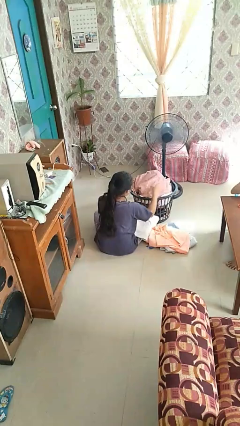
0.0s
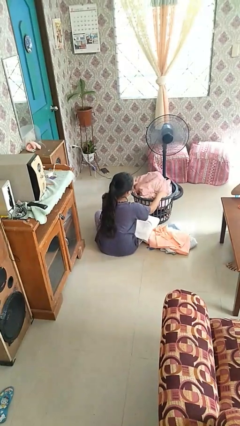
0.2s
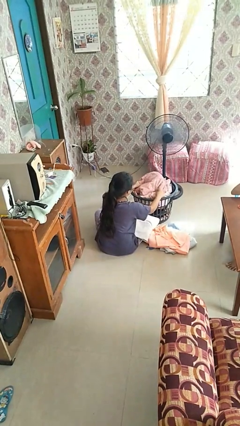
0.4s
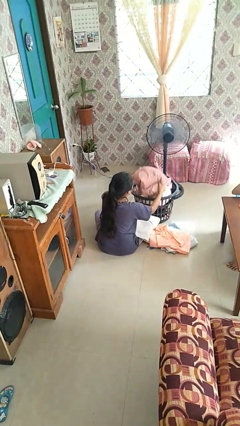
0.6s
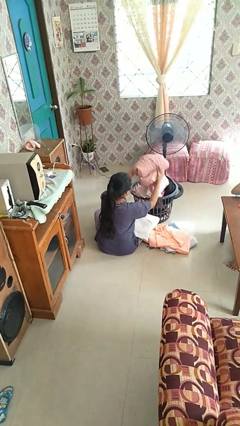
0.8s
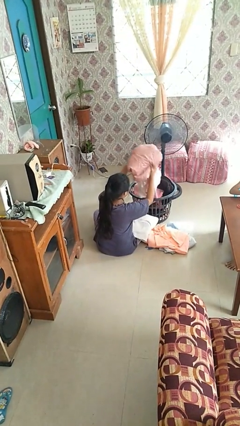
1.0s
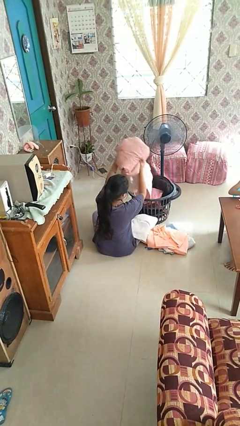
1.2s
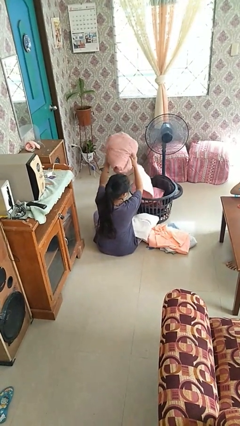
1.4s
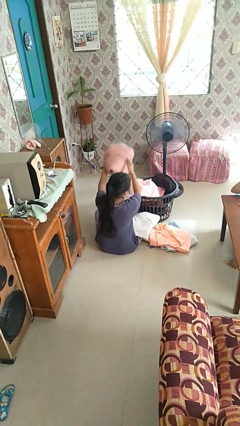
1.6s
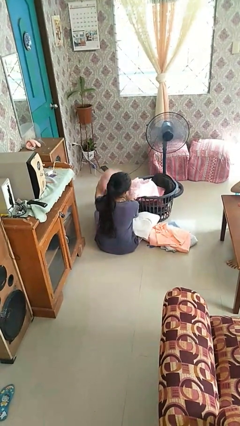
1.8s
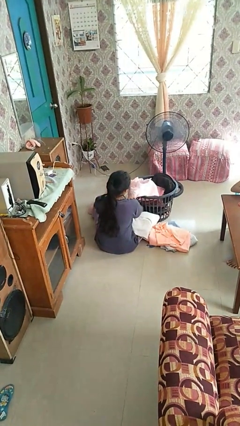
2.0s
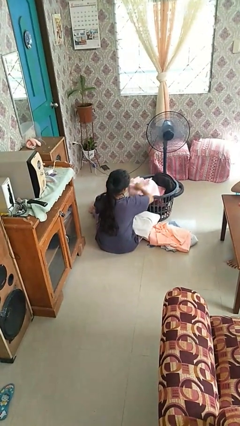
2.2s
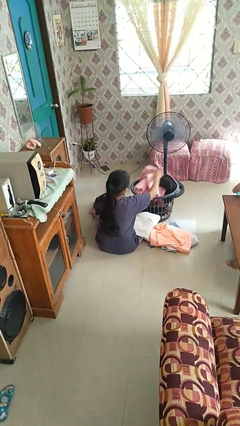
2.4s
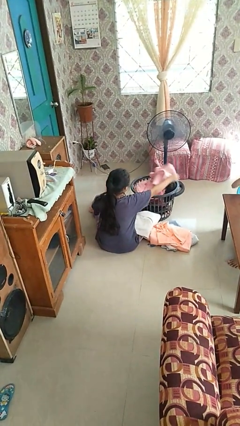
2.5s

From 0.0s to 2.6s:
person takes object from basket

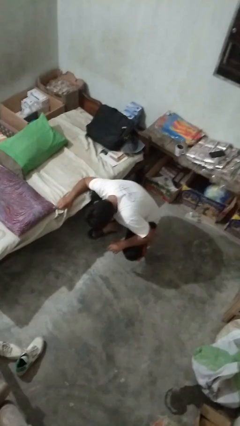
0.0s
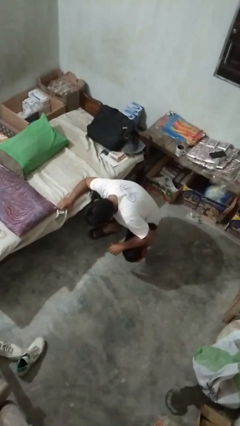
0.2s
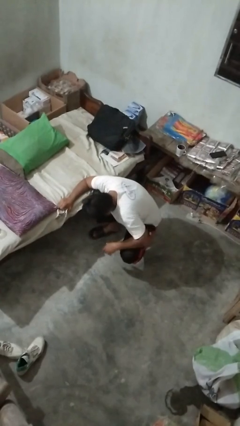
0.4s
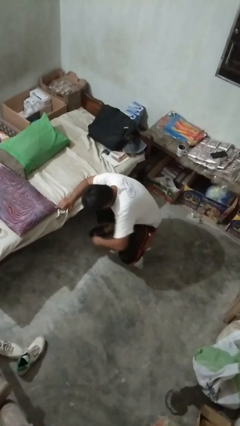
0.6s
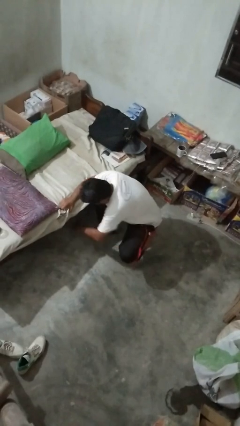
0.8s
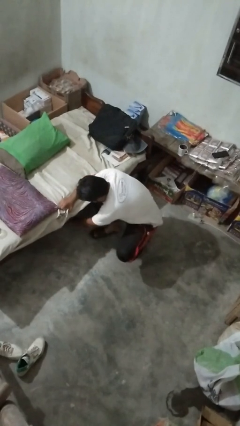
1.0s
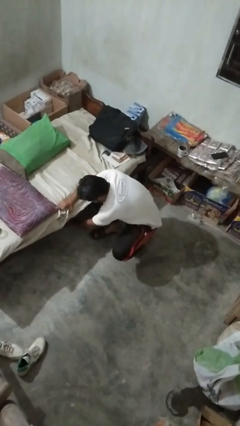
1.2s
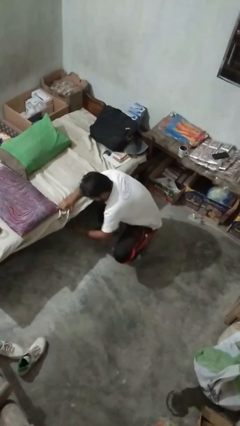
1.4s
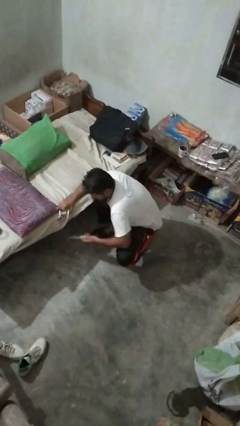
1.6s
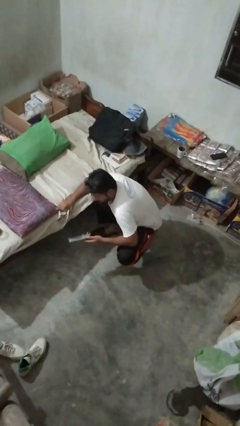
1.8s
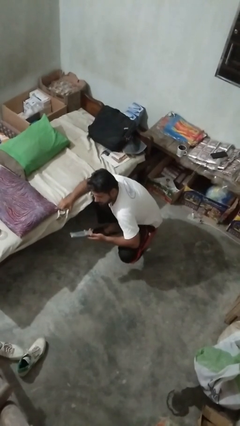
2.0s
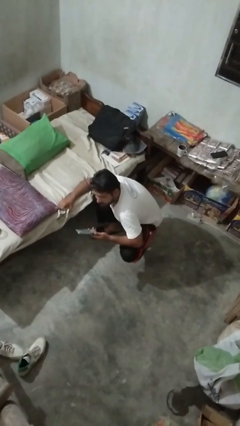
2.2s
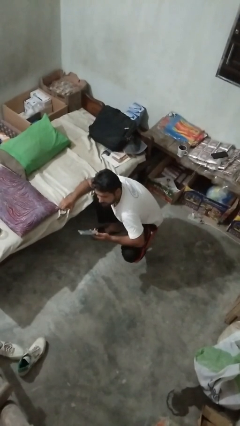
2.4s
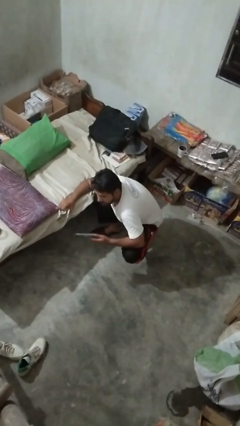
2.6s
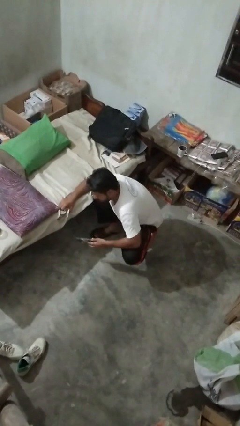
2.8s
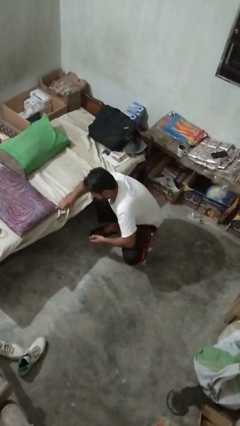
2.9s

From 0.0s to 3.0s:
person searches under couch

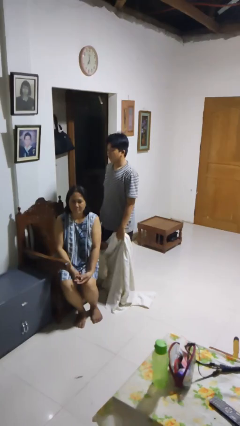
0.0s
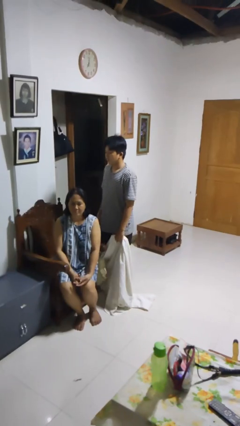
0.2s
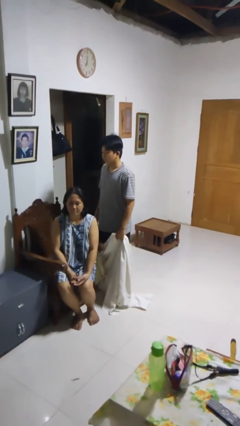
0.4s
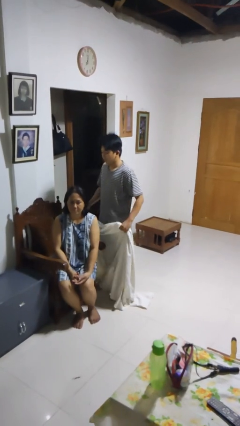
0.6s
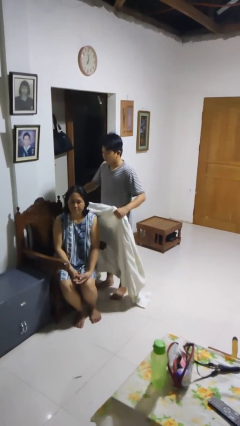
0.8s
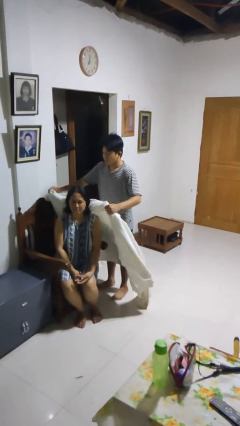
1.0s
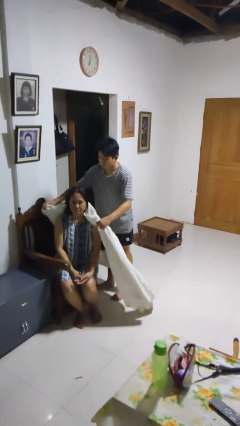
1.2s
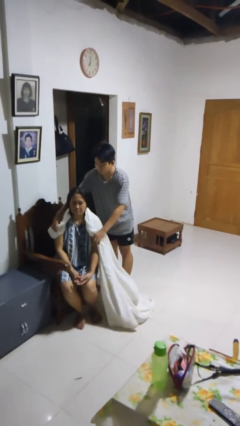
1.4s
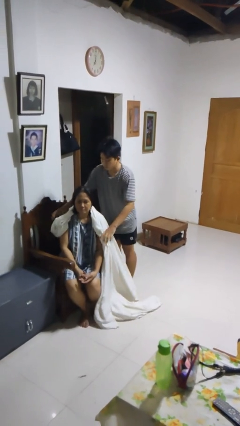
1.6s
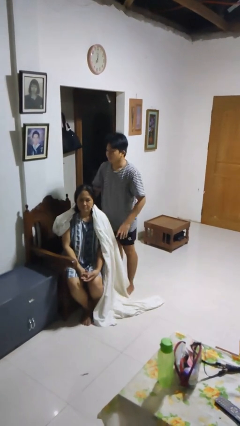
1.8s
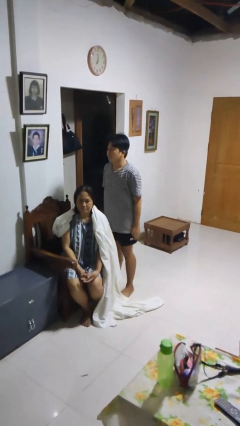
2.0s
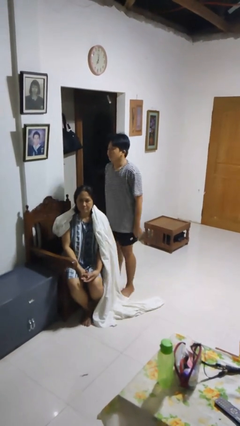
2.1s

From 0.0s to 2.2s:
person covers friend with blanket

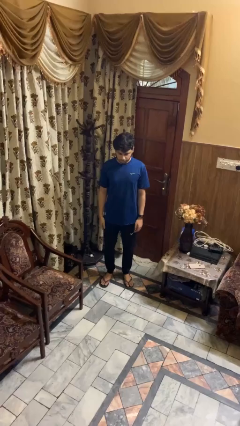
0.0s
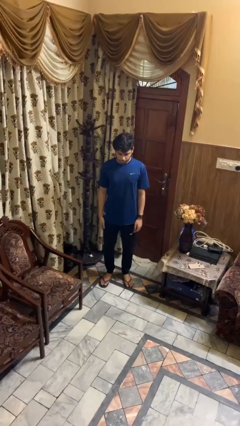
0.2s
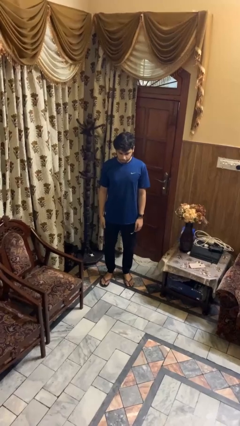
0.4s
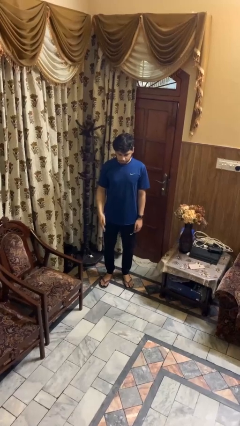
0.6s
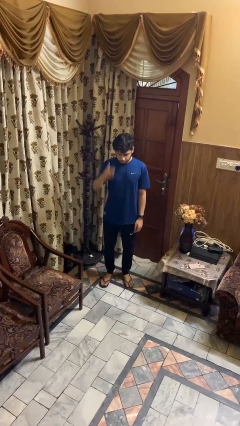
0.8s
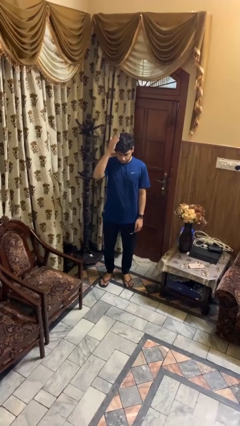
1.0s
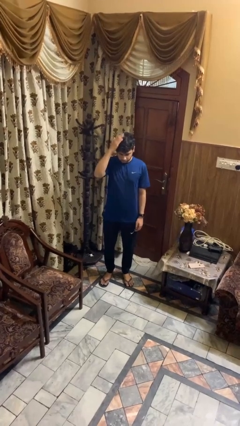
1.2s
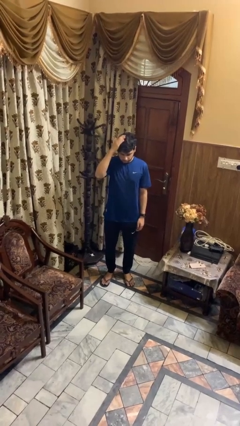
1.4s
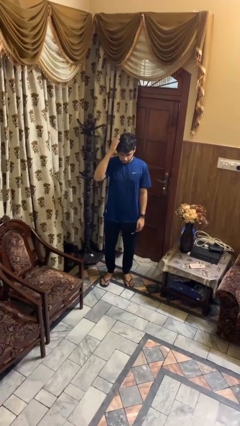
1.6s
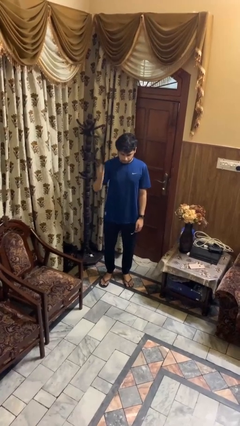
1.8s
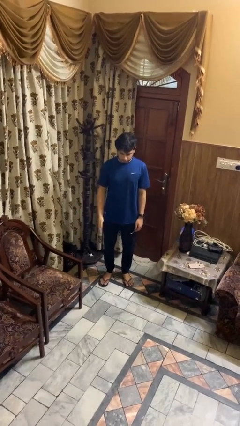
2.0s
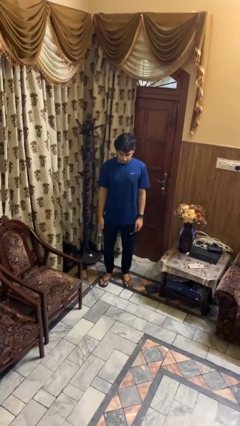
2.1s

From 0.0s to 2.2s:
person pats head

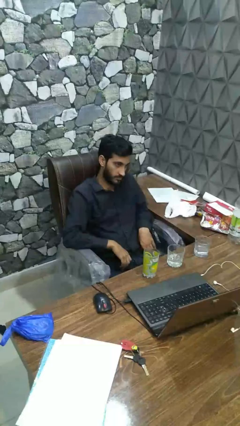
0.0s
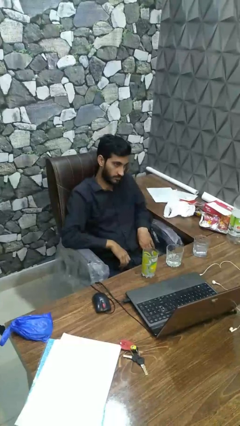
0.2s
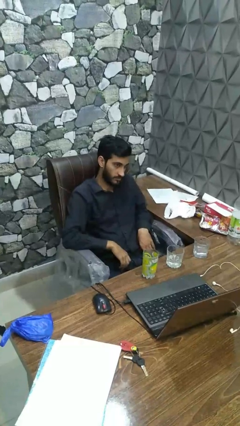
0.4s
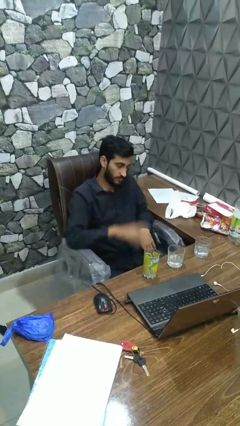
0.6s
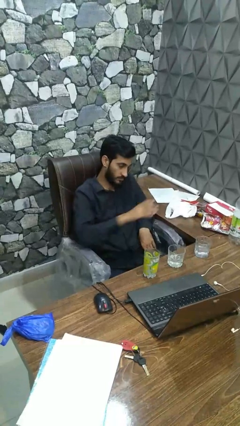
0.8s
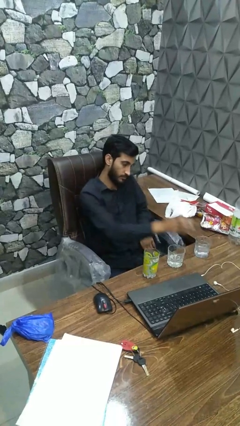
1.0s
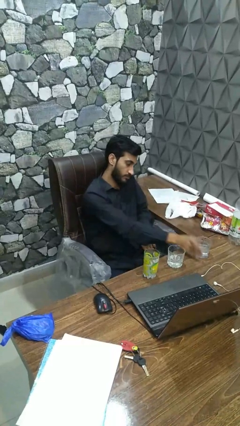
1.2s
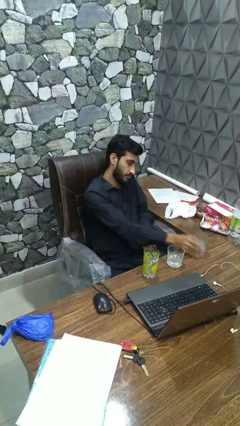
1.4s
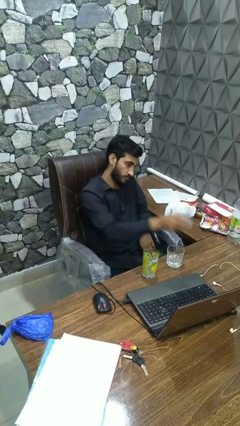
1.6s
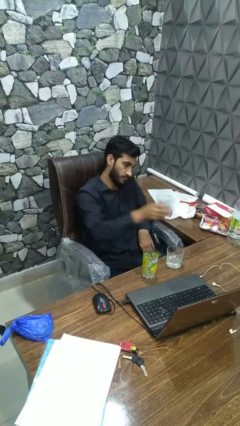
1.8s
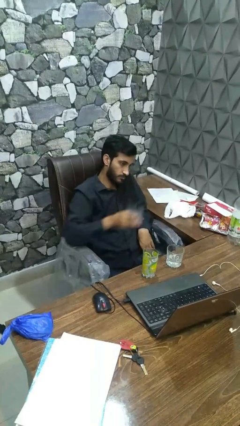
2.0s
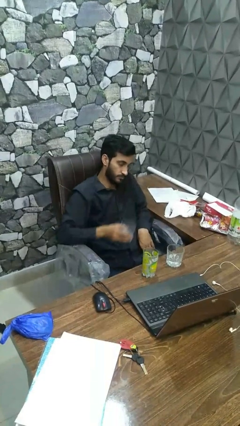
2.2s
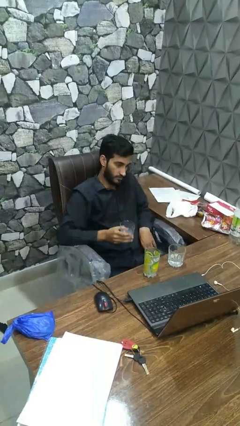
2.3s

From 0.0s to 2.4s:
person picks up object from table

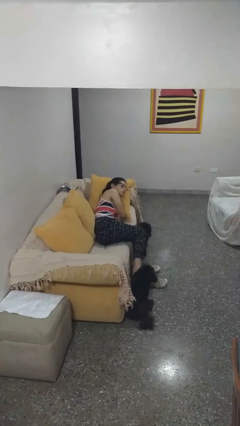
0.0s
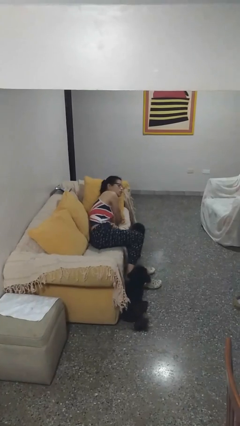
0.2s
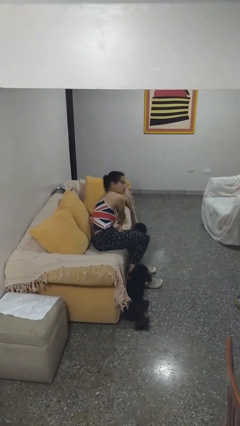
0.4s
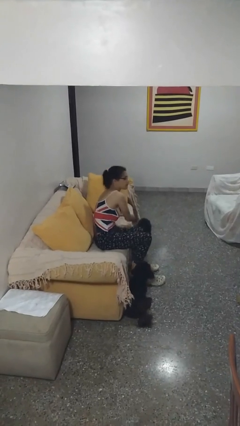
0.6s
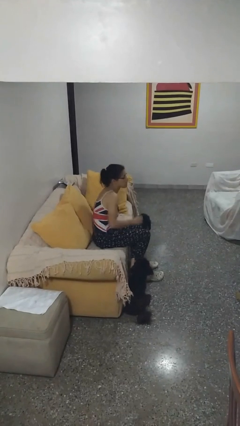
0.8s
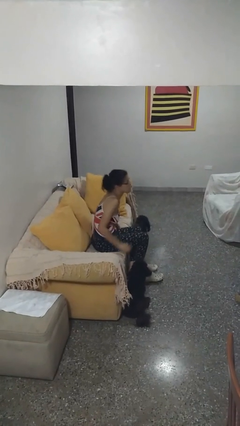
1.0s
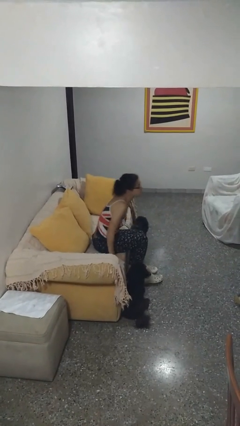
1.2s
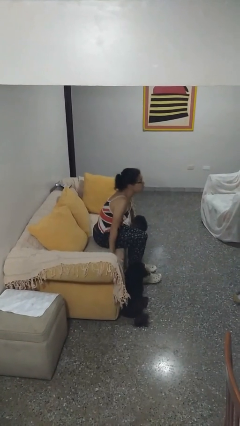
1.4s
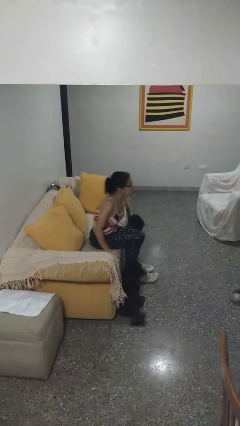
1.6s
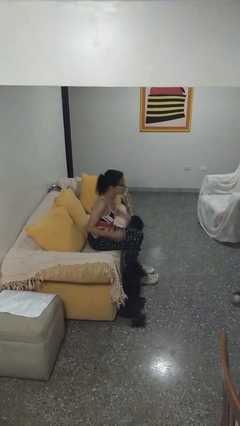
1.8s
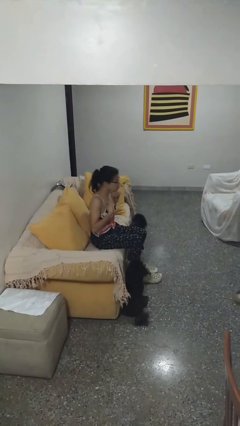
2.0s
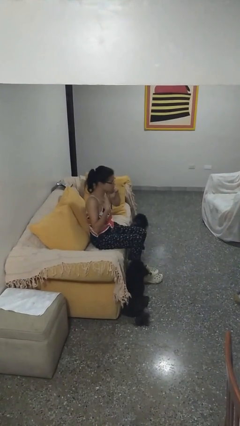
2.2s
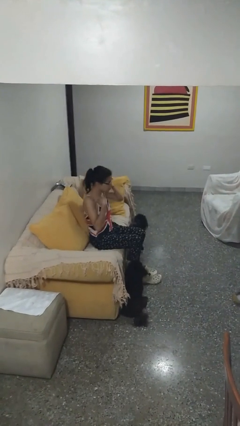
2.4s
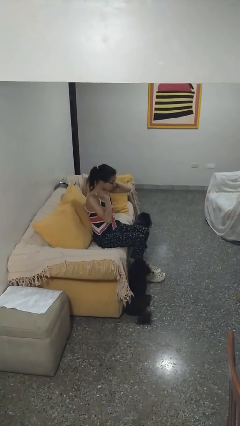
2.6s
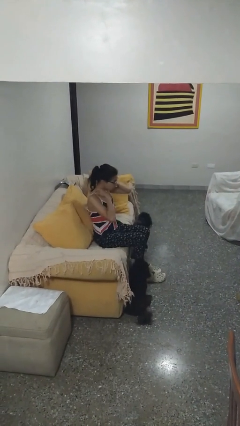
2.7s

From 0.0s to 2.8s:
person stands up

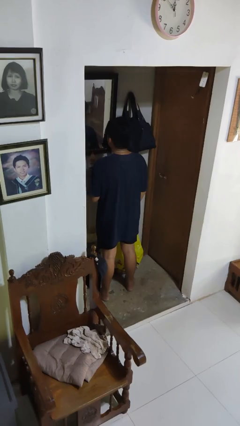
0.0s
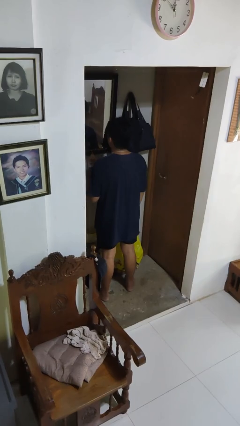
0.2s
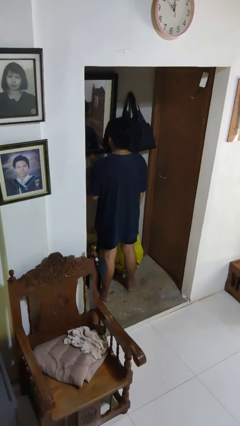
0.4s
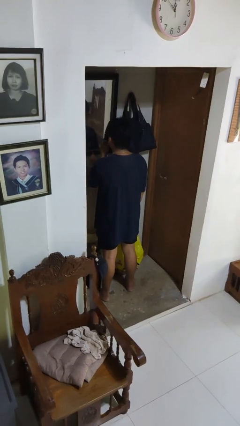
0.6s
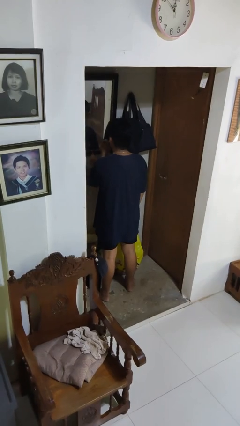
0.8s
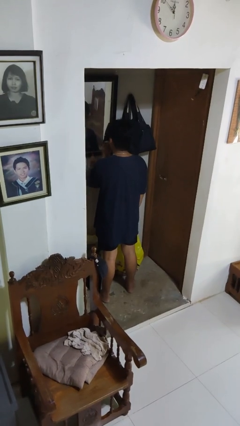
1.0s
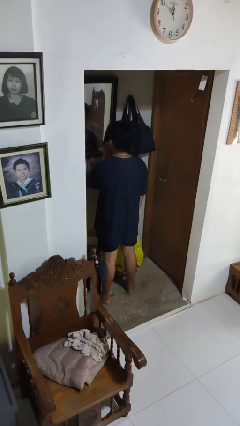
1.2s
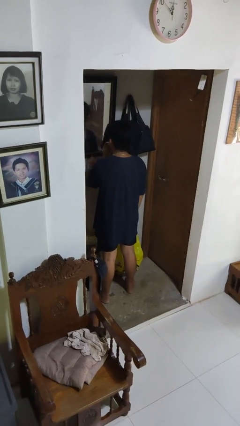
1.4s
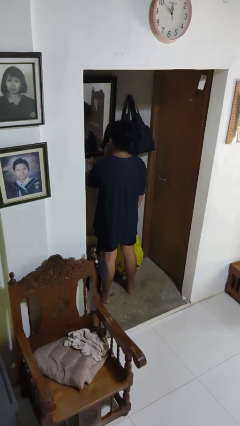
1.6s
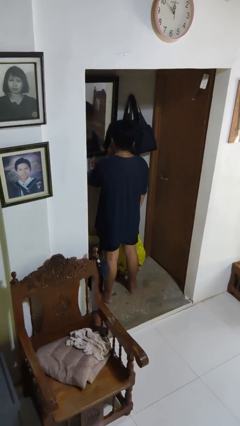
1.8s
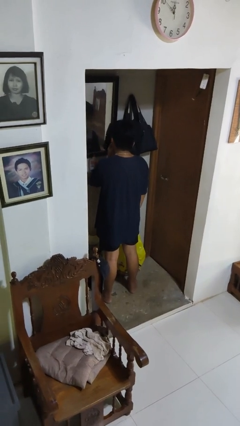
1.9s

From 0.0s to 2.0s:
person applies lip makeup
